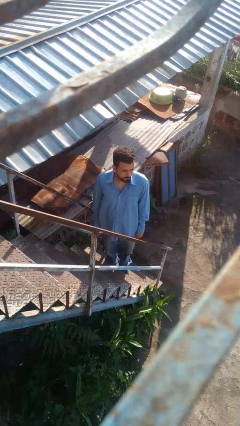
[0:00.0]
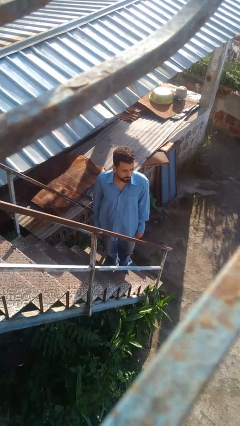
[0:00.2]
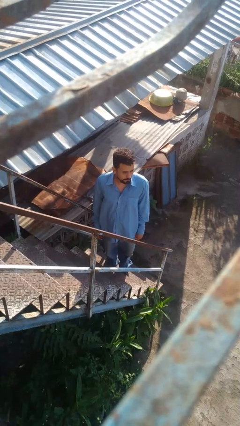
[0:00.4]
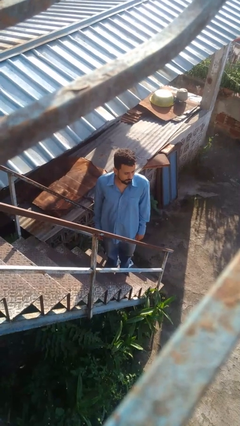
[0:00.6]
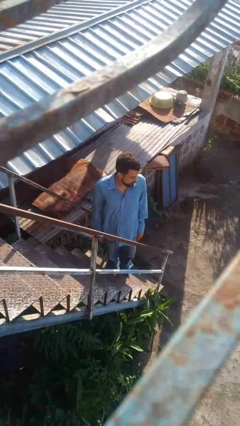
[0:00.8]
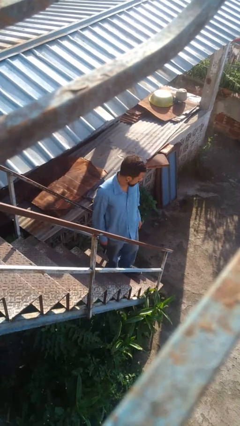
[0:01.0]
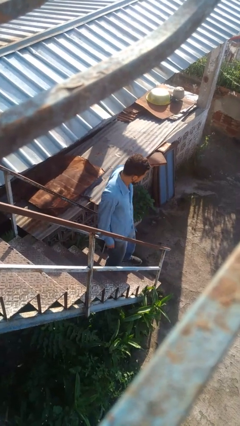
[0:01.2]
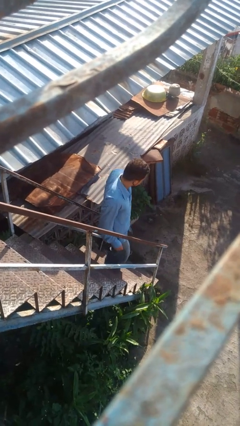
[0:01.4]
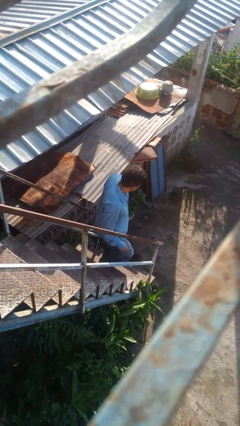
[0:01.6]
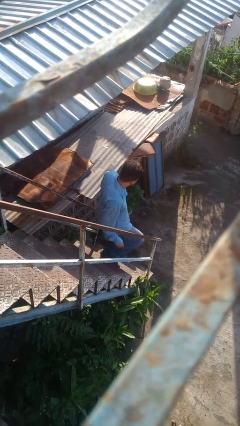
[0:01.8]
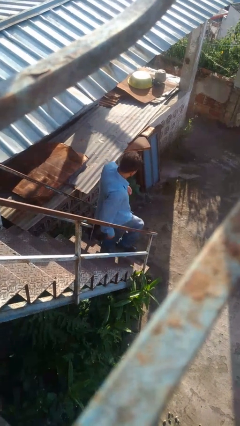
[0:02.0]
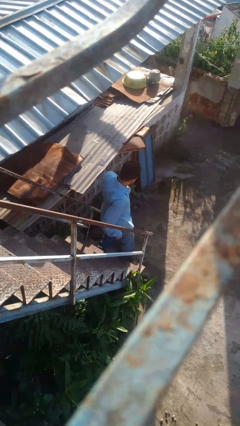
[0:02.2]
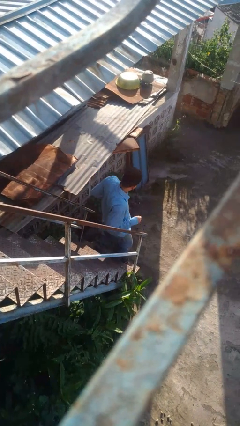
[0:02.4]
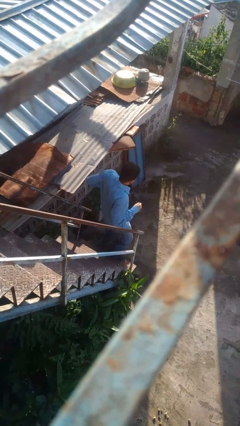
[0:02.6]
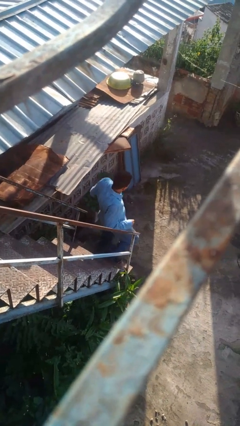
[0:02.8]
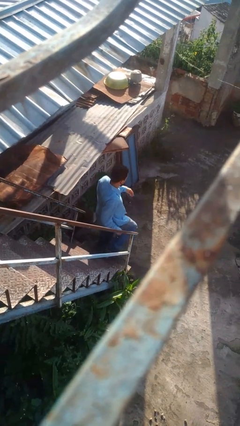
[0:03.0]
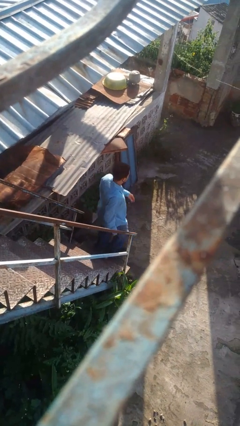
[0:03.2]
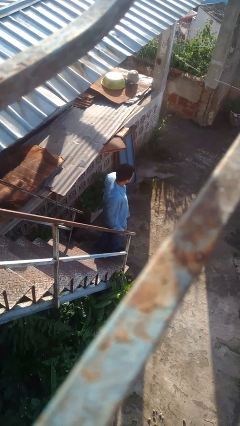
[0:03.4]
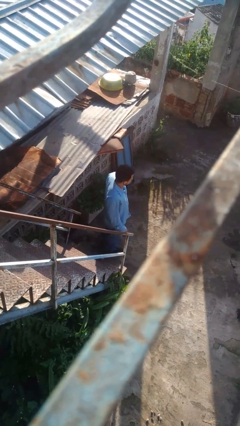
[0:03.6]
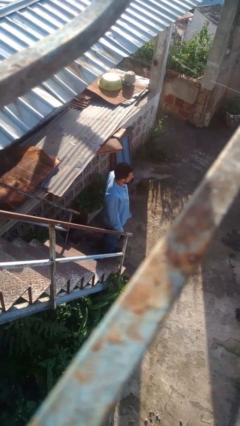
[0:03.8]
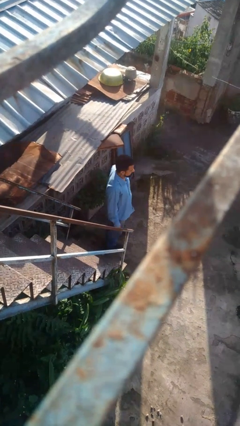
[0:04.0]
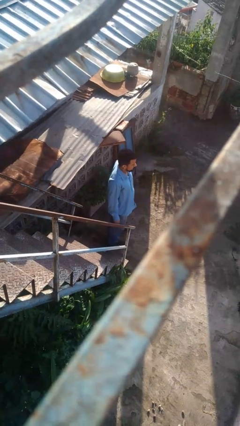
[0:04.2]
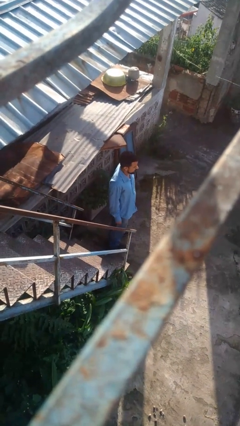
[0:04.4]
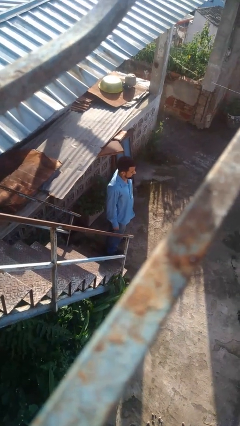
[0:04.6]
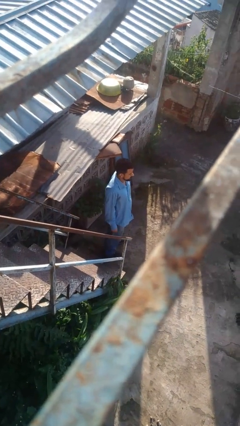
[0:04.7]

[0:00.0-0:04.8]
person climbs down stairs

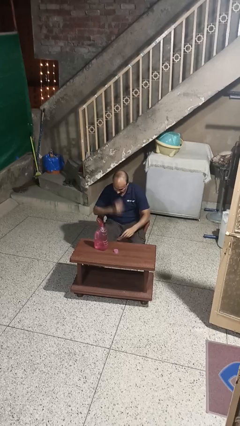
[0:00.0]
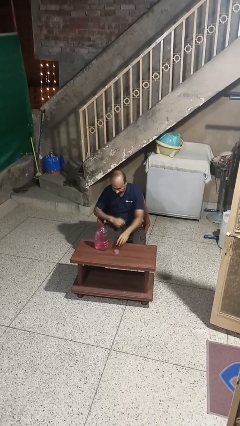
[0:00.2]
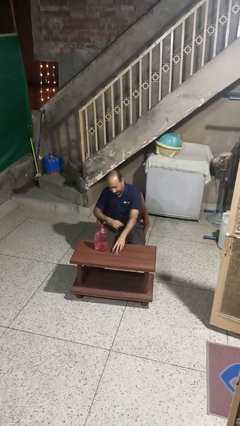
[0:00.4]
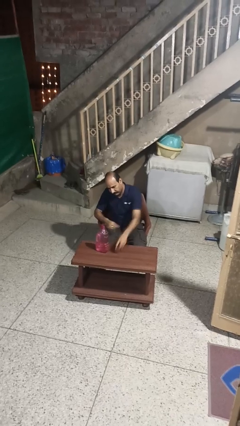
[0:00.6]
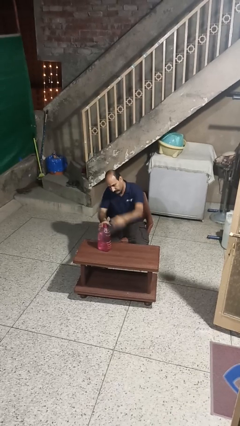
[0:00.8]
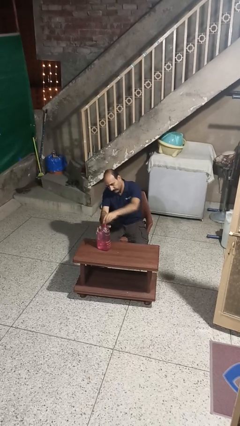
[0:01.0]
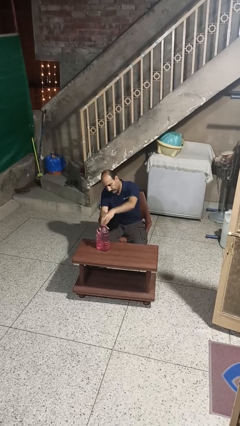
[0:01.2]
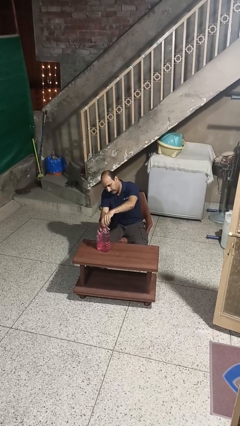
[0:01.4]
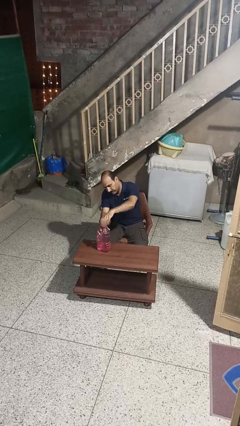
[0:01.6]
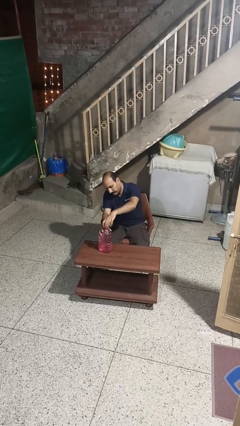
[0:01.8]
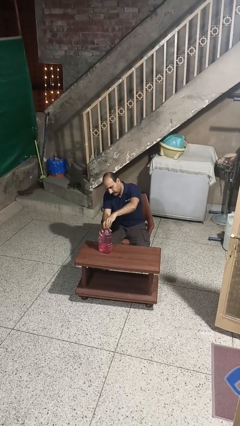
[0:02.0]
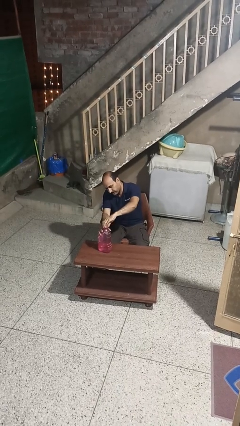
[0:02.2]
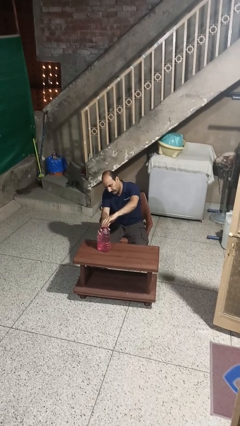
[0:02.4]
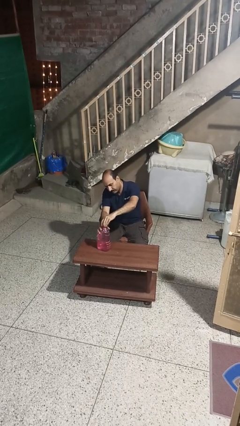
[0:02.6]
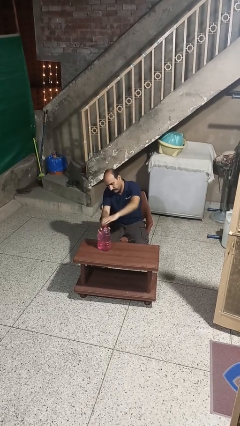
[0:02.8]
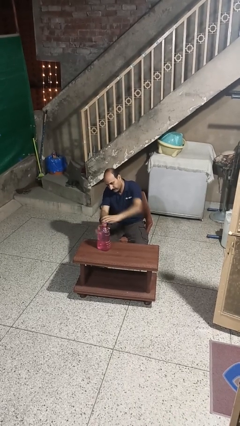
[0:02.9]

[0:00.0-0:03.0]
person screws lid to bottle

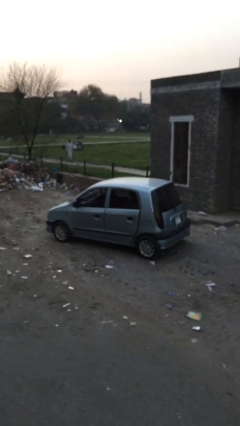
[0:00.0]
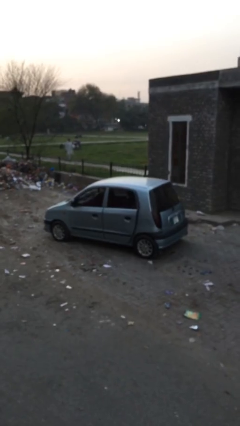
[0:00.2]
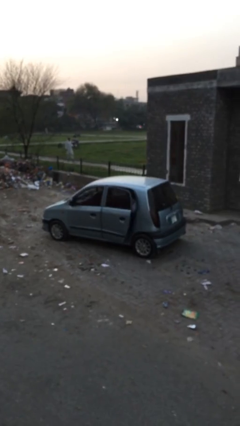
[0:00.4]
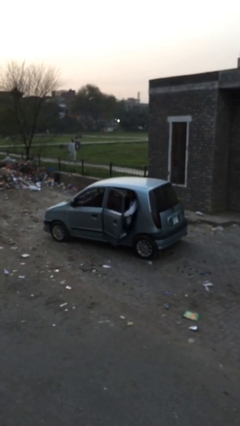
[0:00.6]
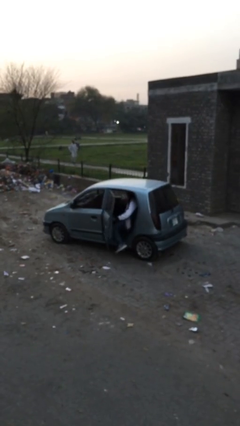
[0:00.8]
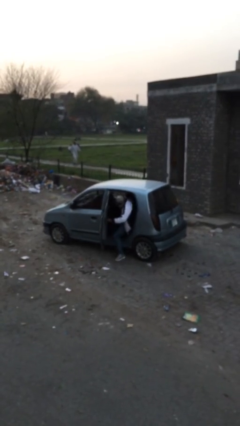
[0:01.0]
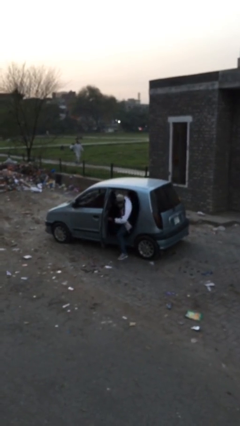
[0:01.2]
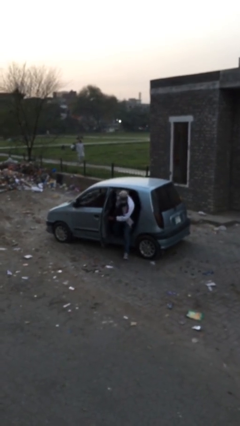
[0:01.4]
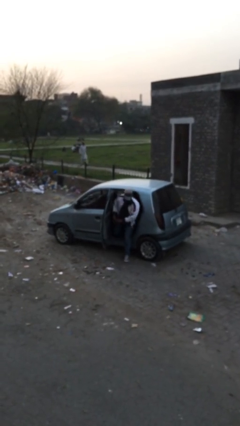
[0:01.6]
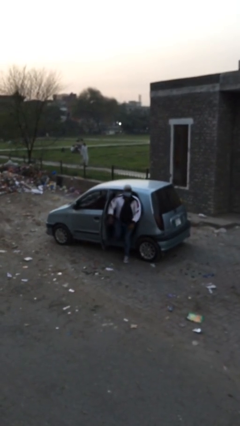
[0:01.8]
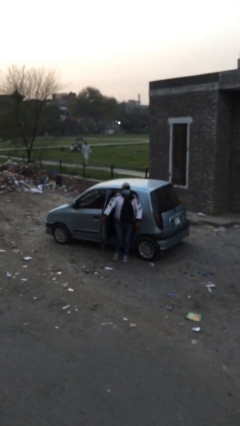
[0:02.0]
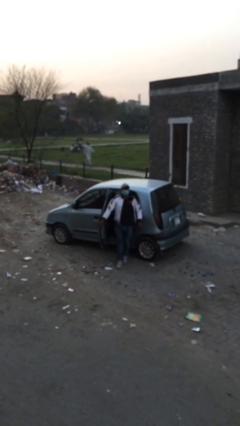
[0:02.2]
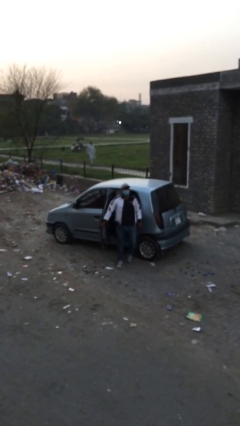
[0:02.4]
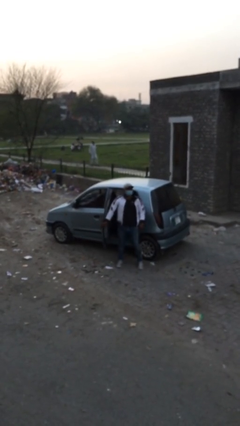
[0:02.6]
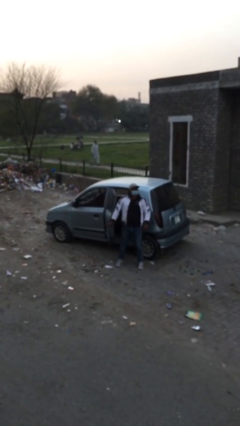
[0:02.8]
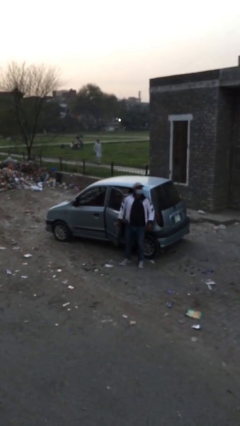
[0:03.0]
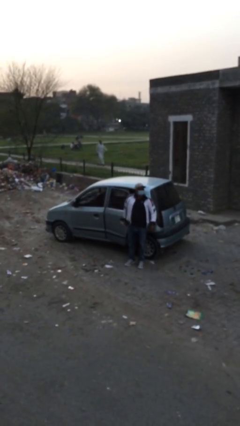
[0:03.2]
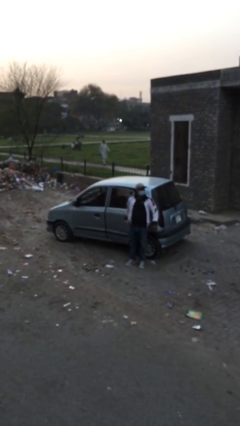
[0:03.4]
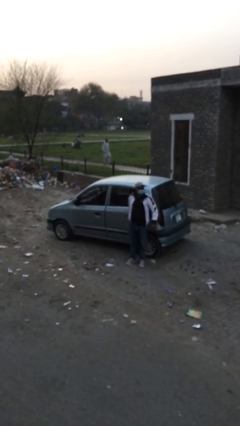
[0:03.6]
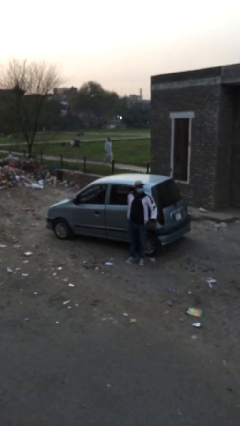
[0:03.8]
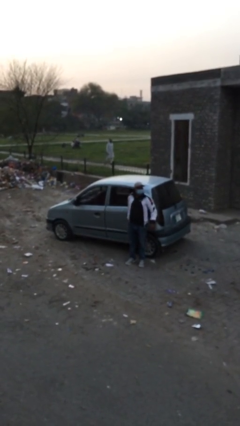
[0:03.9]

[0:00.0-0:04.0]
car drops off person

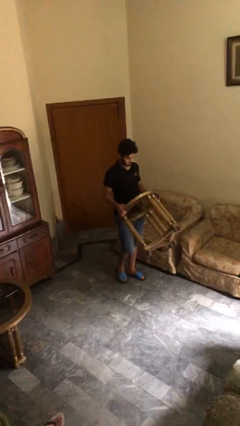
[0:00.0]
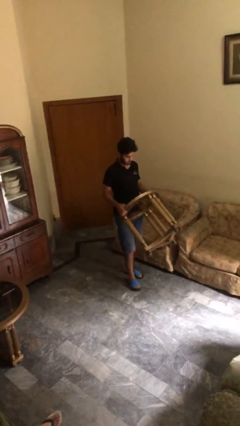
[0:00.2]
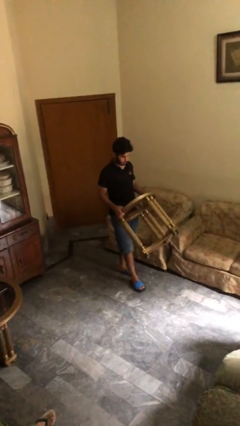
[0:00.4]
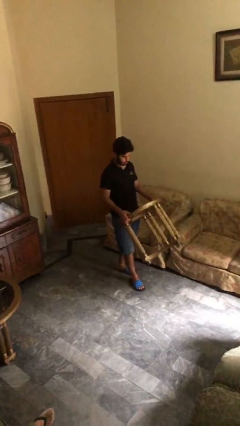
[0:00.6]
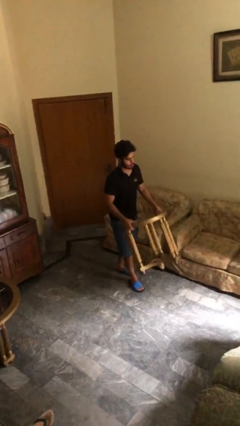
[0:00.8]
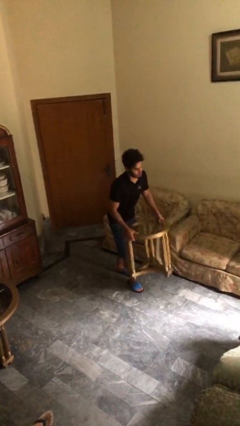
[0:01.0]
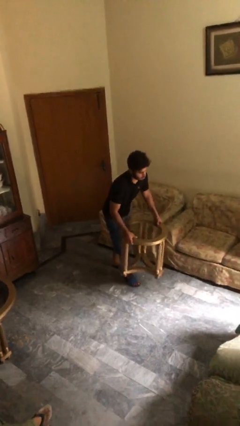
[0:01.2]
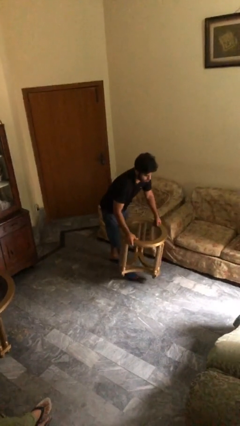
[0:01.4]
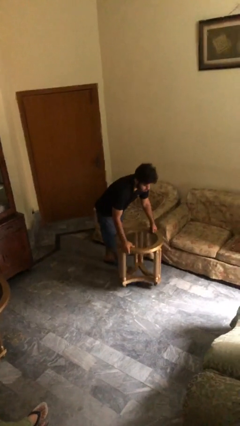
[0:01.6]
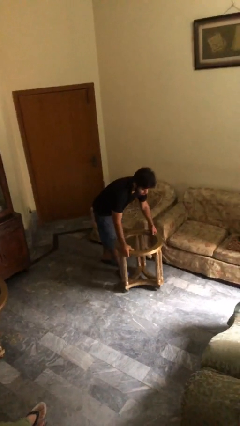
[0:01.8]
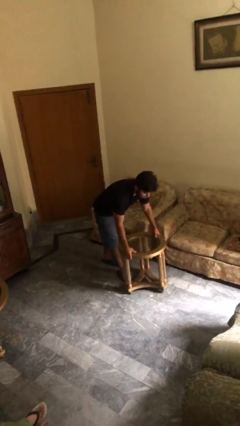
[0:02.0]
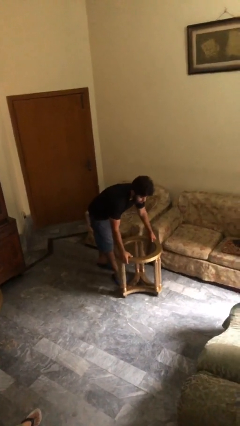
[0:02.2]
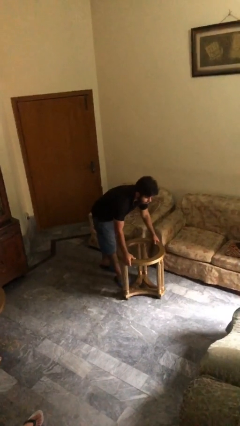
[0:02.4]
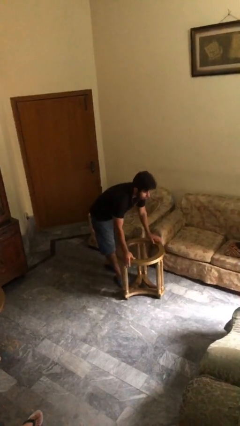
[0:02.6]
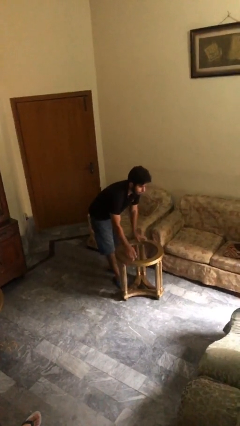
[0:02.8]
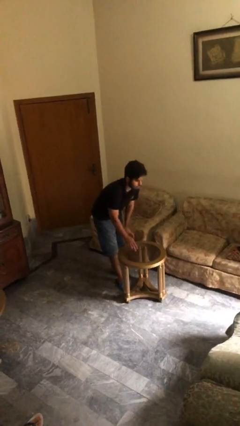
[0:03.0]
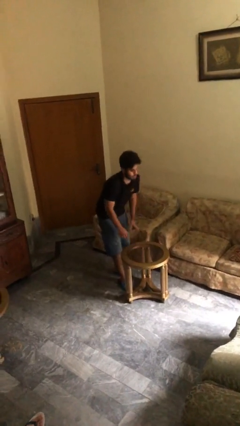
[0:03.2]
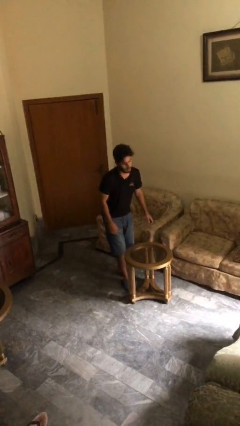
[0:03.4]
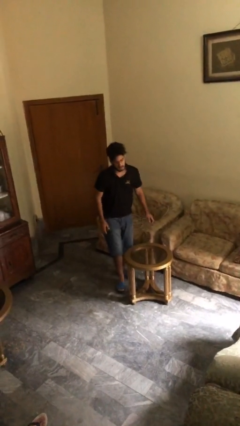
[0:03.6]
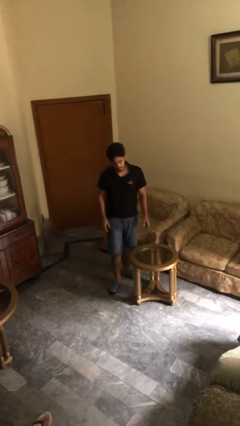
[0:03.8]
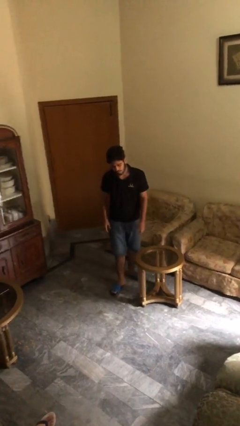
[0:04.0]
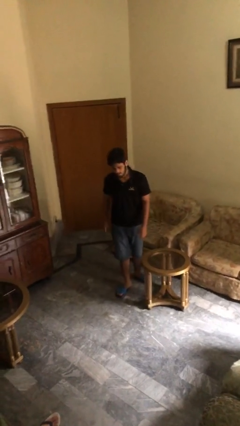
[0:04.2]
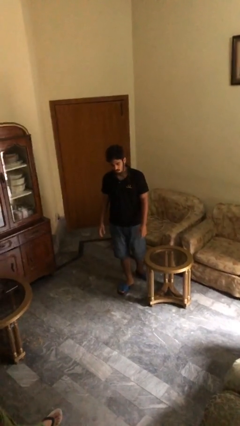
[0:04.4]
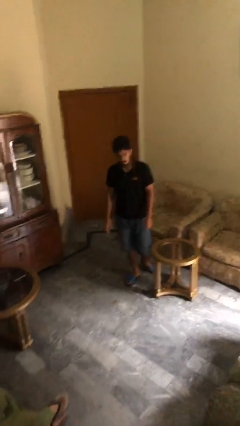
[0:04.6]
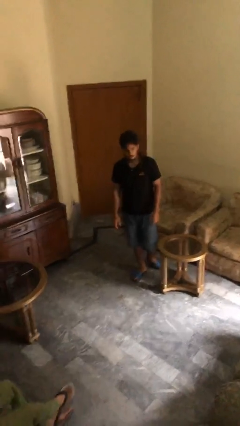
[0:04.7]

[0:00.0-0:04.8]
person puts down object on floor

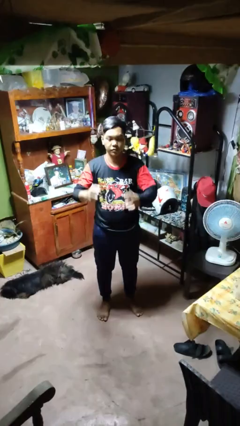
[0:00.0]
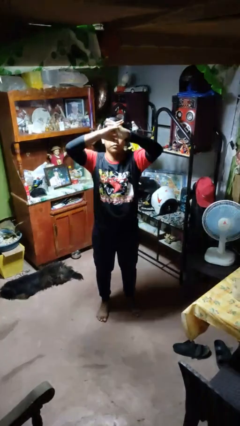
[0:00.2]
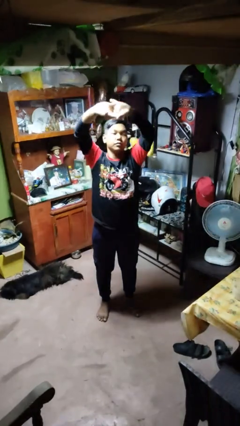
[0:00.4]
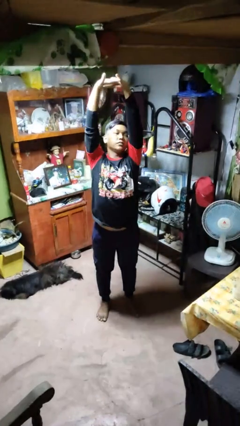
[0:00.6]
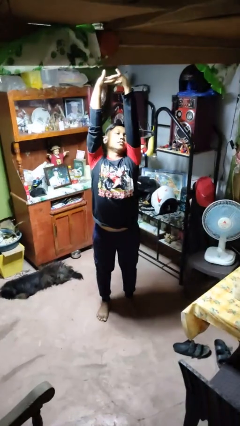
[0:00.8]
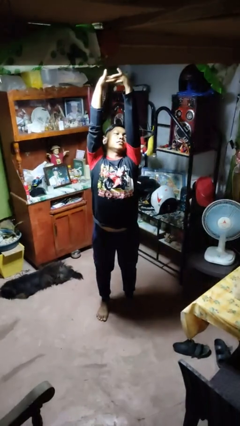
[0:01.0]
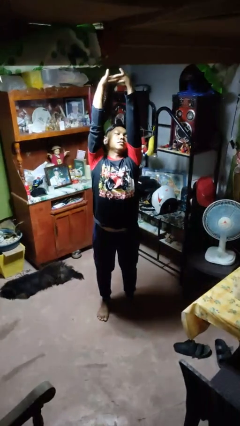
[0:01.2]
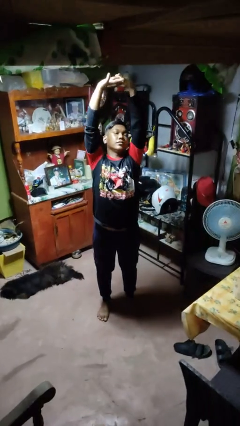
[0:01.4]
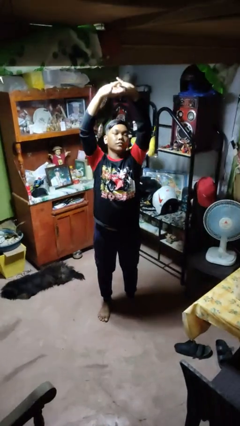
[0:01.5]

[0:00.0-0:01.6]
person stretches arms over head
